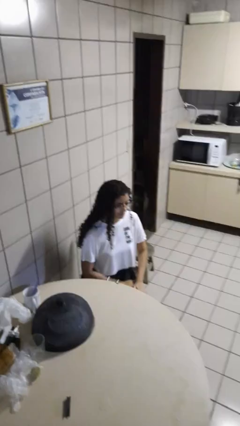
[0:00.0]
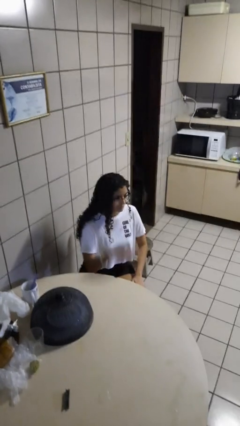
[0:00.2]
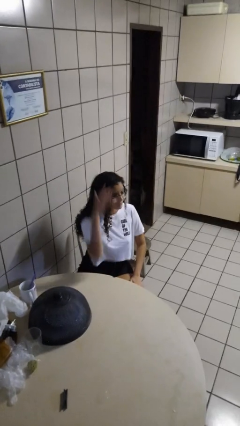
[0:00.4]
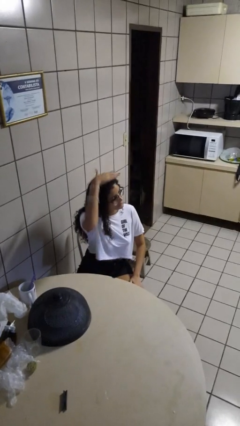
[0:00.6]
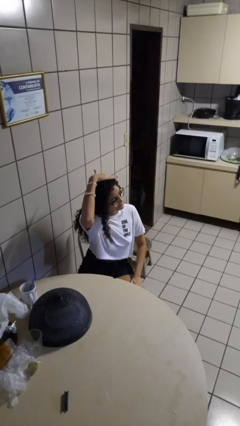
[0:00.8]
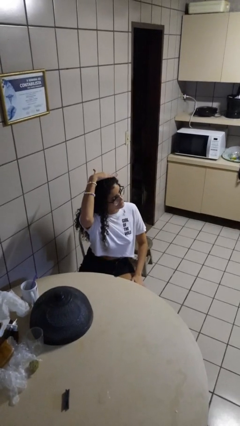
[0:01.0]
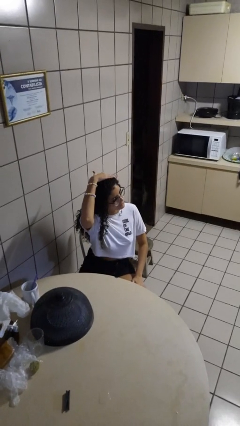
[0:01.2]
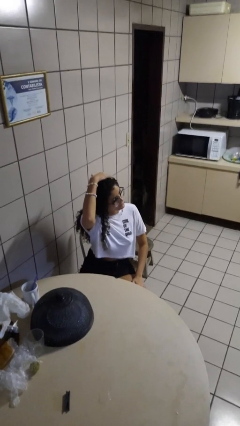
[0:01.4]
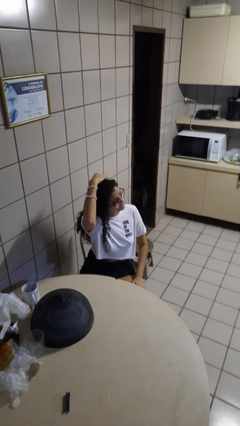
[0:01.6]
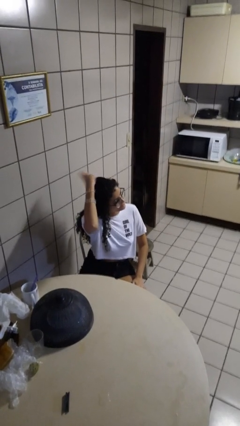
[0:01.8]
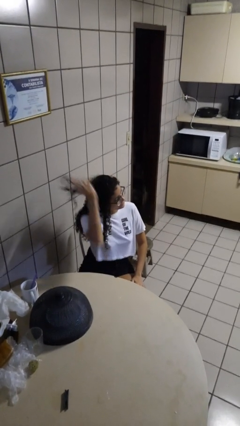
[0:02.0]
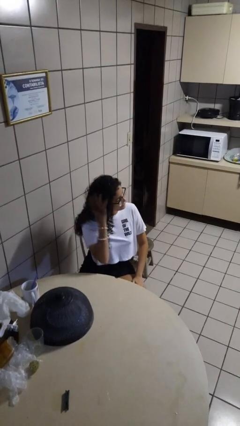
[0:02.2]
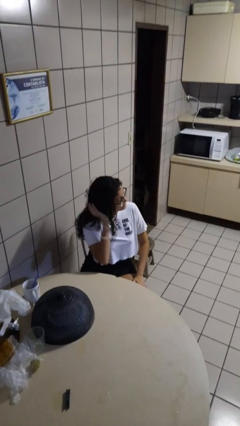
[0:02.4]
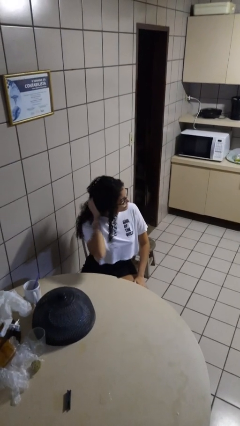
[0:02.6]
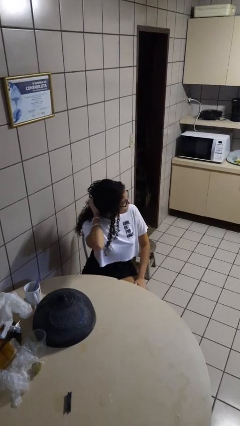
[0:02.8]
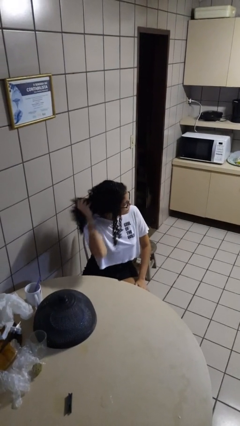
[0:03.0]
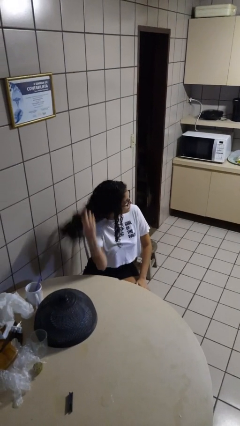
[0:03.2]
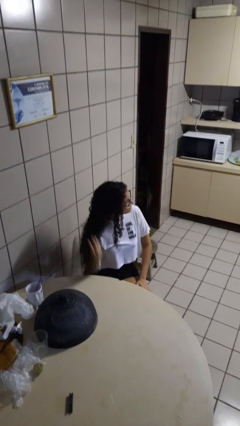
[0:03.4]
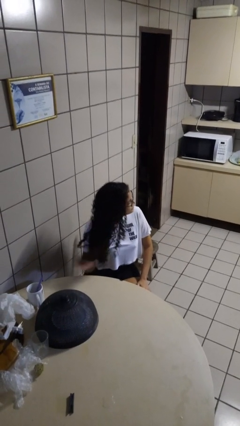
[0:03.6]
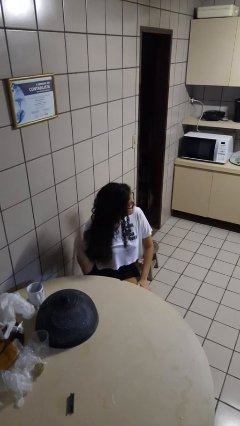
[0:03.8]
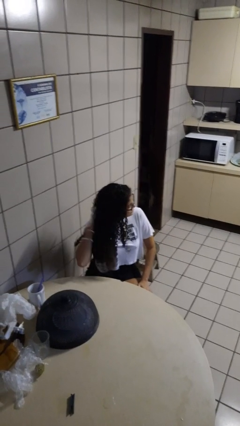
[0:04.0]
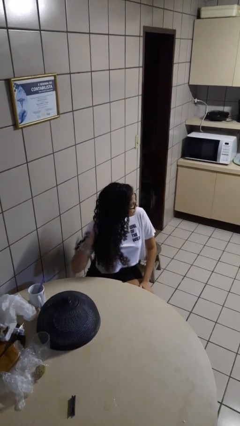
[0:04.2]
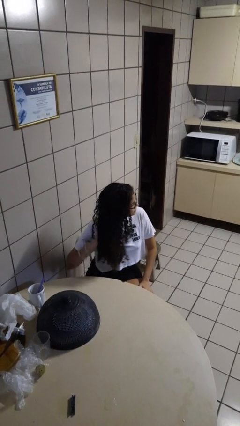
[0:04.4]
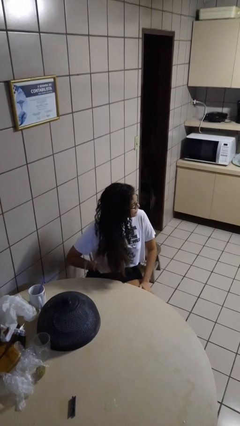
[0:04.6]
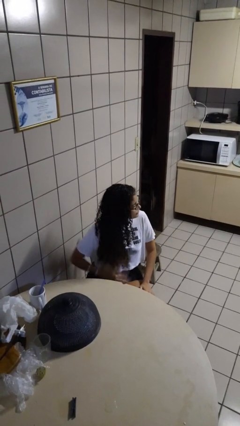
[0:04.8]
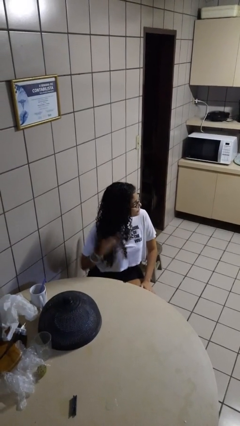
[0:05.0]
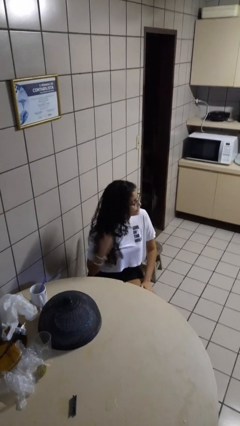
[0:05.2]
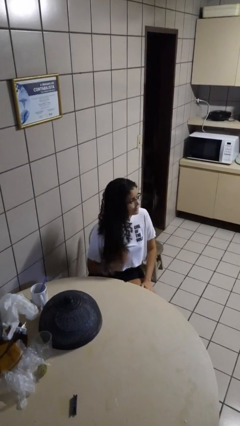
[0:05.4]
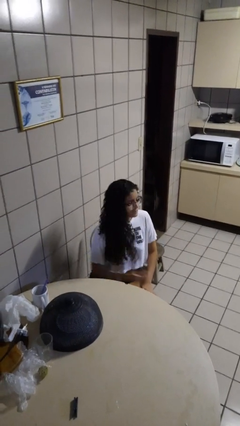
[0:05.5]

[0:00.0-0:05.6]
person strokes hair

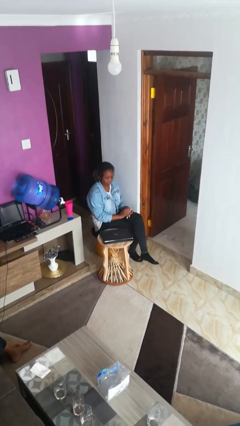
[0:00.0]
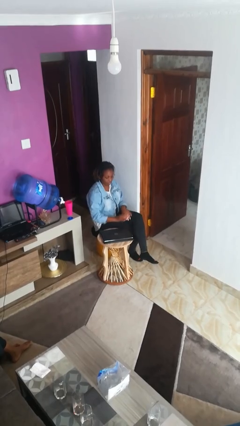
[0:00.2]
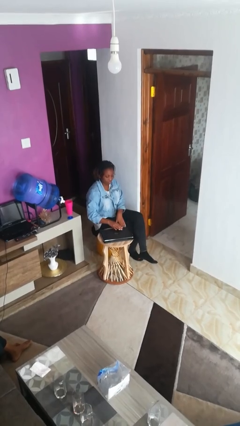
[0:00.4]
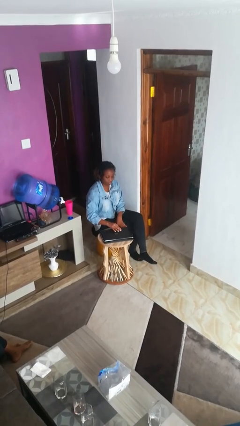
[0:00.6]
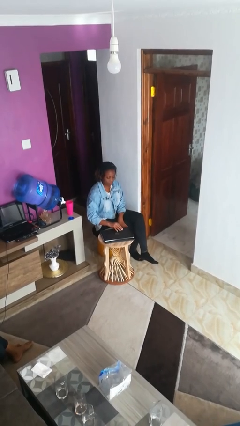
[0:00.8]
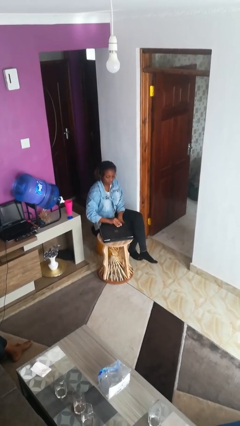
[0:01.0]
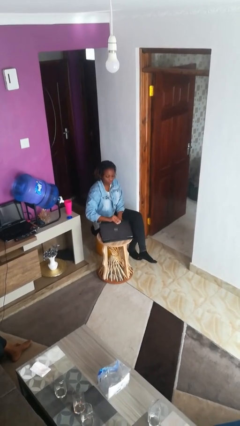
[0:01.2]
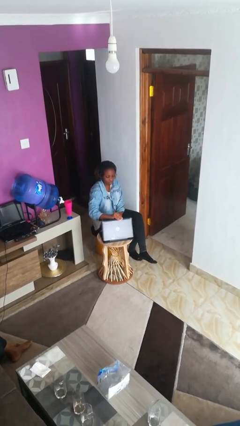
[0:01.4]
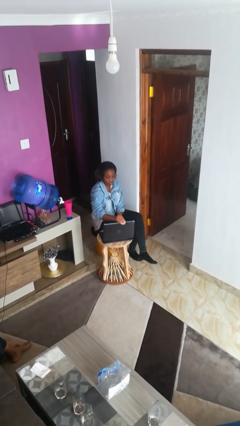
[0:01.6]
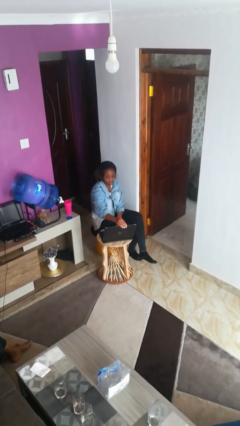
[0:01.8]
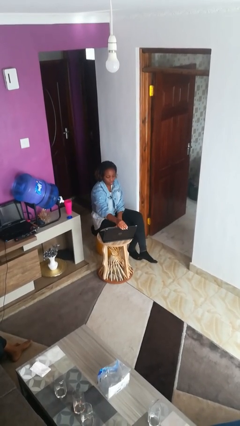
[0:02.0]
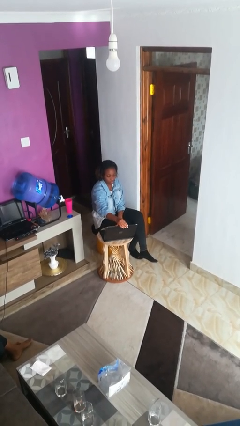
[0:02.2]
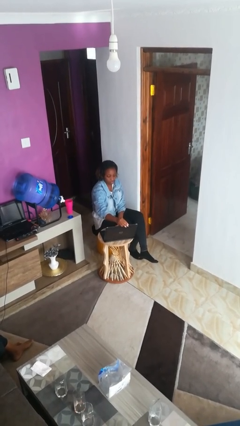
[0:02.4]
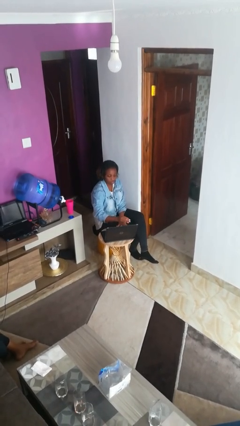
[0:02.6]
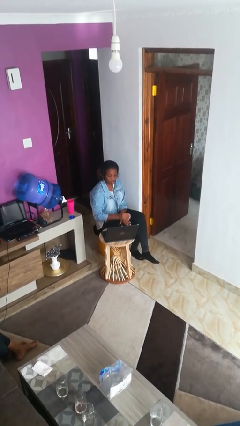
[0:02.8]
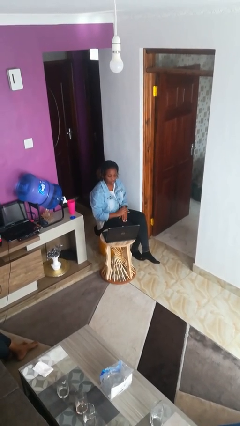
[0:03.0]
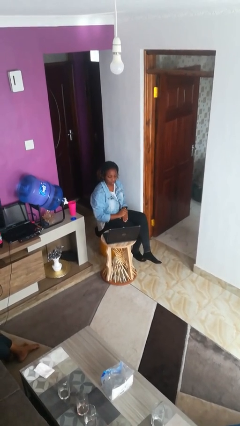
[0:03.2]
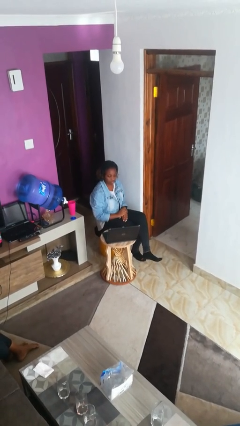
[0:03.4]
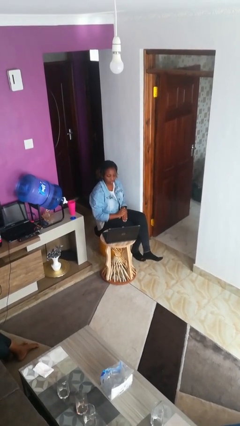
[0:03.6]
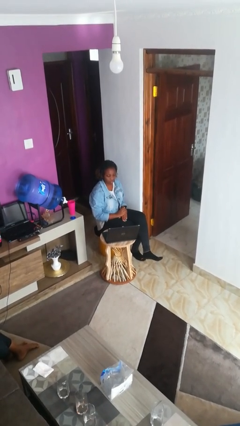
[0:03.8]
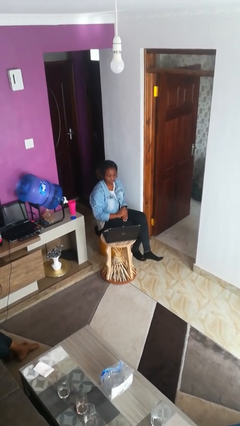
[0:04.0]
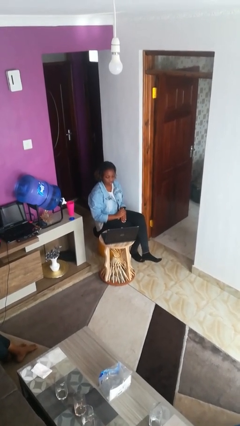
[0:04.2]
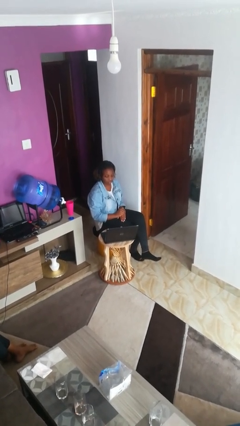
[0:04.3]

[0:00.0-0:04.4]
person opens laptop

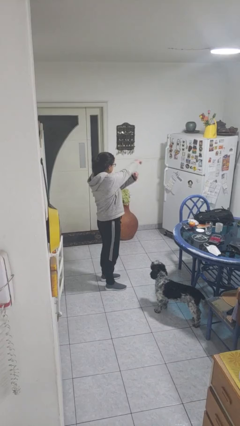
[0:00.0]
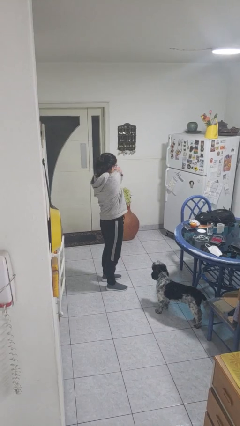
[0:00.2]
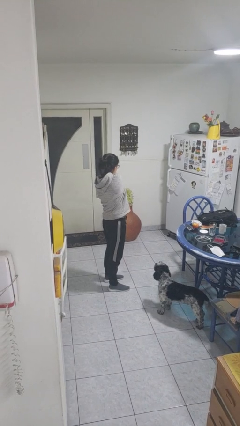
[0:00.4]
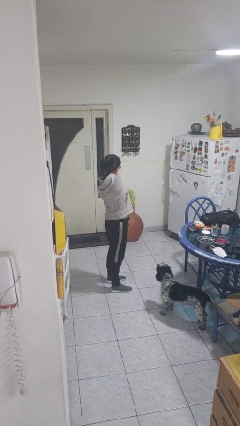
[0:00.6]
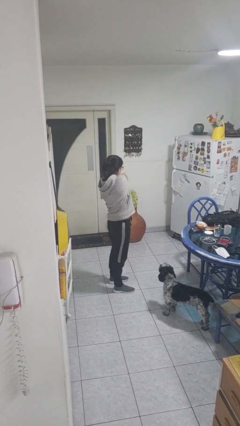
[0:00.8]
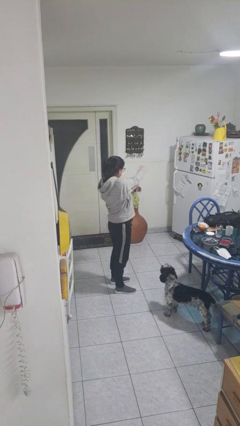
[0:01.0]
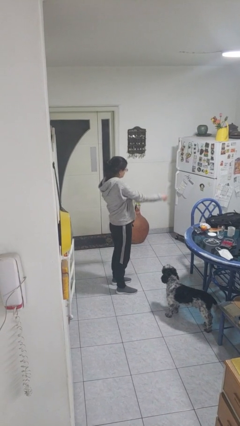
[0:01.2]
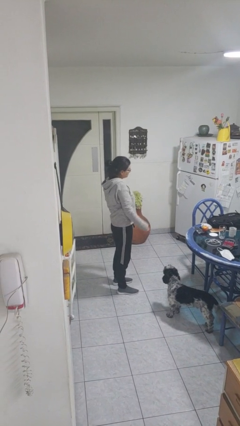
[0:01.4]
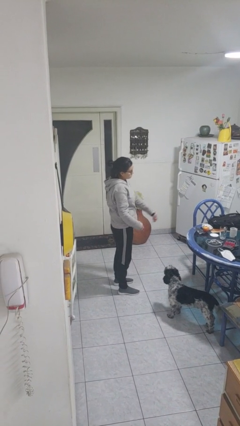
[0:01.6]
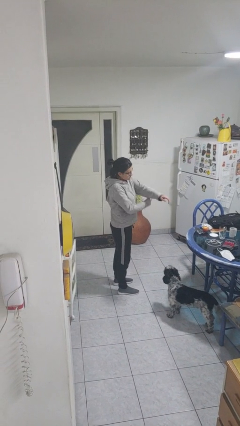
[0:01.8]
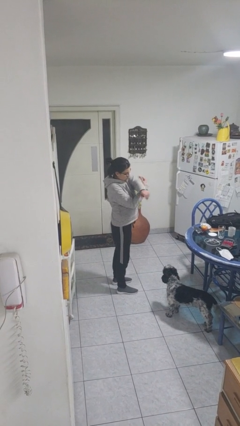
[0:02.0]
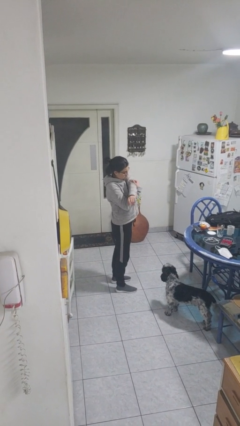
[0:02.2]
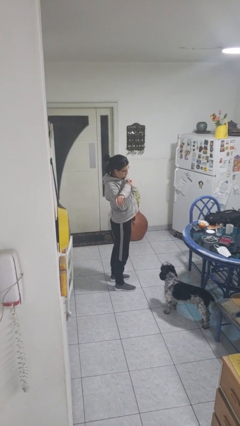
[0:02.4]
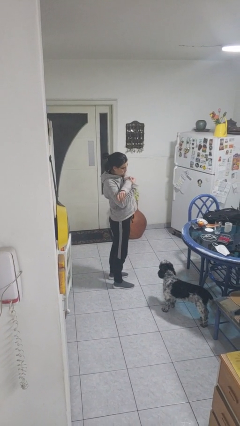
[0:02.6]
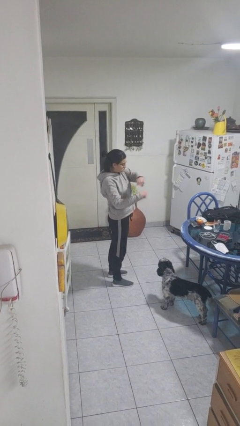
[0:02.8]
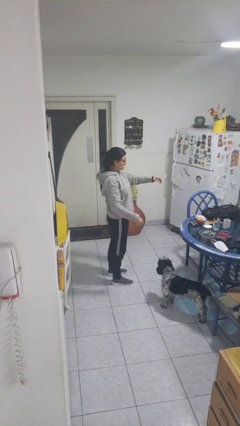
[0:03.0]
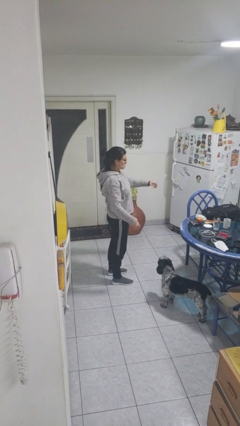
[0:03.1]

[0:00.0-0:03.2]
person stretches arms to side

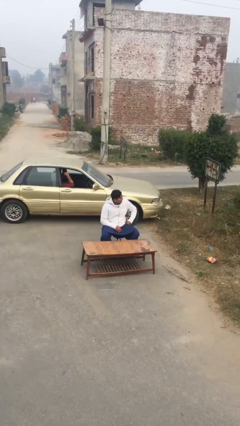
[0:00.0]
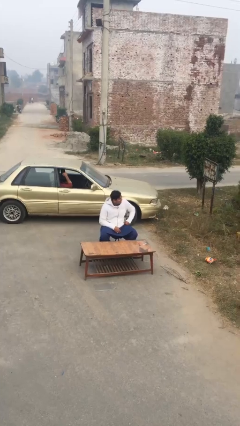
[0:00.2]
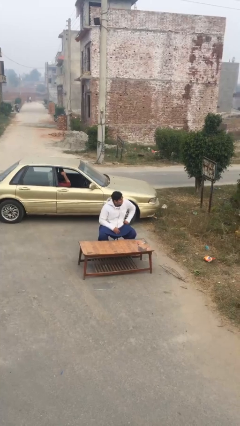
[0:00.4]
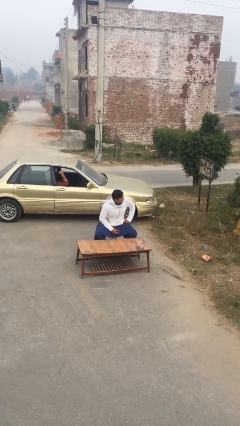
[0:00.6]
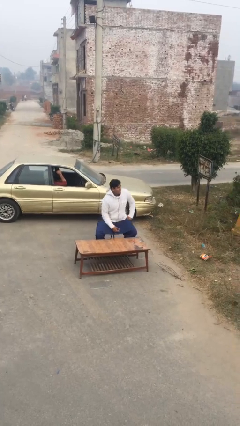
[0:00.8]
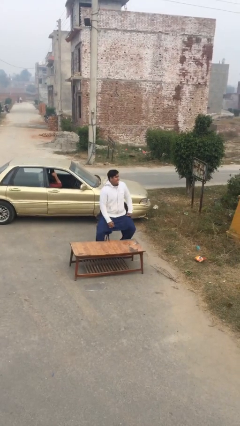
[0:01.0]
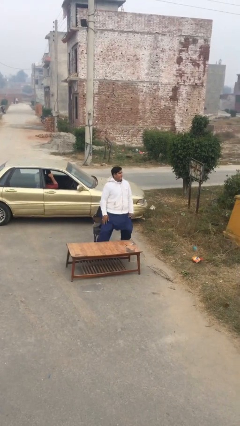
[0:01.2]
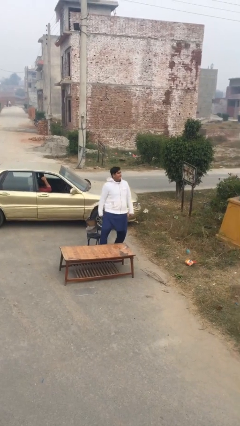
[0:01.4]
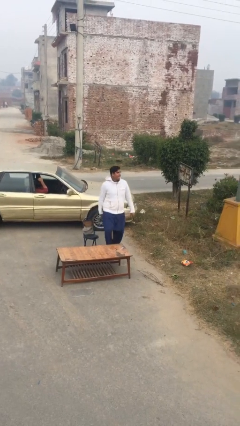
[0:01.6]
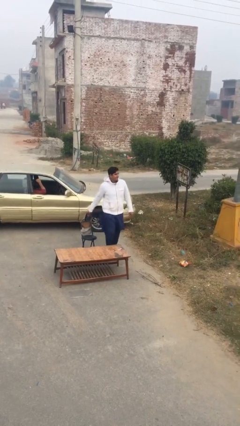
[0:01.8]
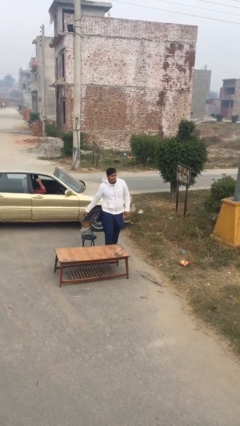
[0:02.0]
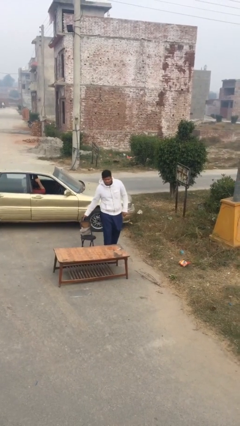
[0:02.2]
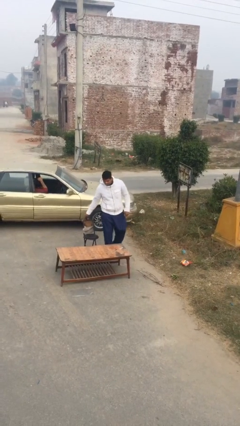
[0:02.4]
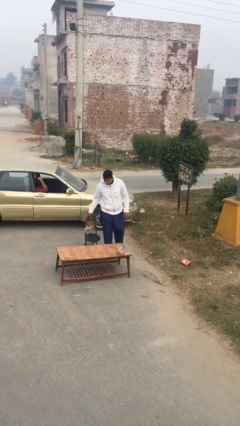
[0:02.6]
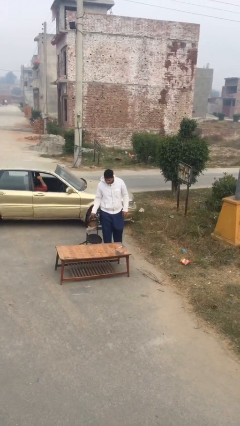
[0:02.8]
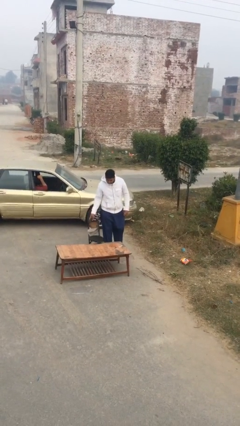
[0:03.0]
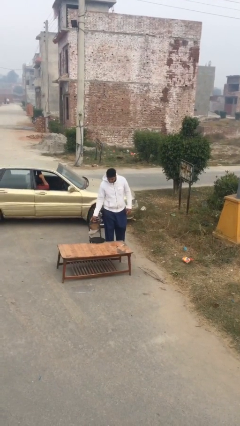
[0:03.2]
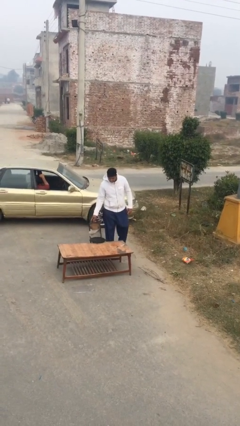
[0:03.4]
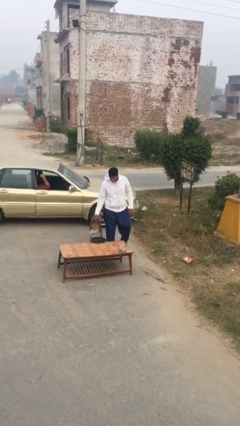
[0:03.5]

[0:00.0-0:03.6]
person stands up

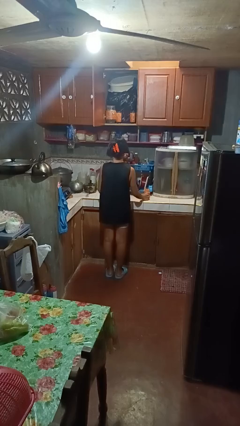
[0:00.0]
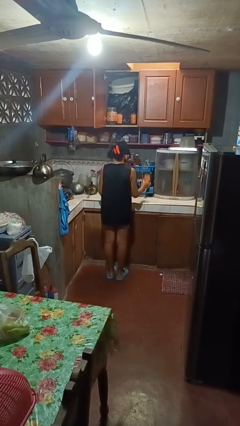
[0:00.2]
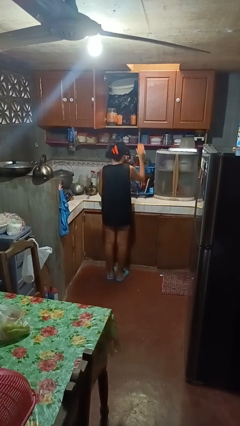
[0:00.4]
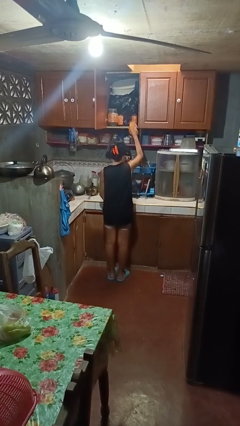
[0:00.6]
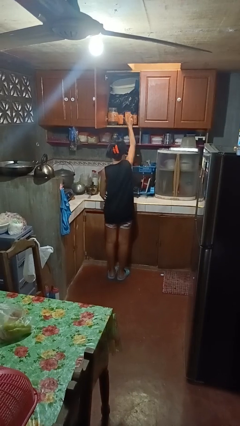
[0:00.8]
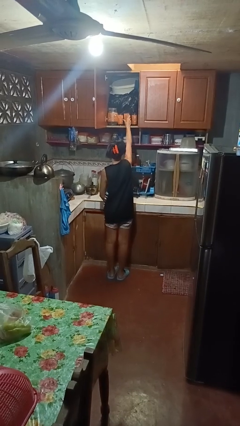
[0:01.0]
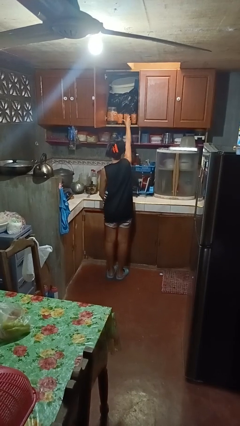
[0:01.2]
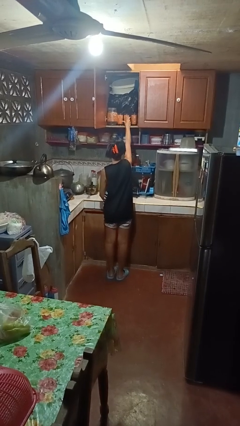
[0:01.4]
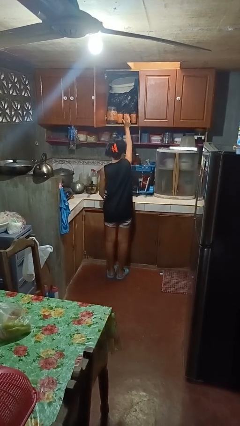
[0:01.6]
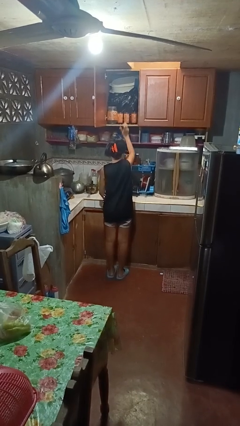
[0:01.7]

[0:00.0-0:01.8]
person puts object in cabinet
